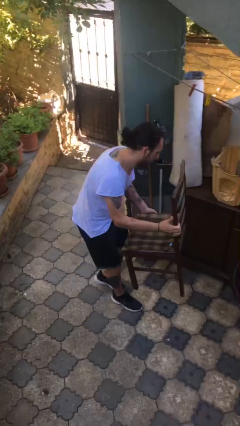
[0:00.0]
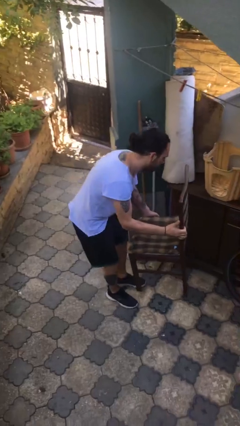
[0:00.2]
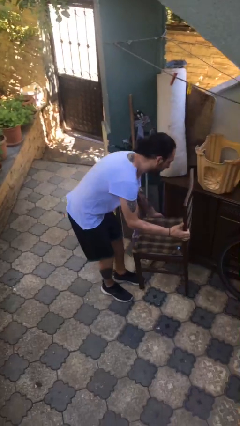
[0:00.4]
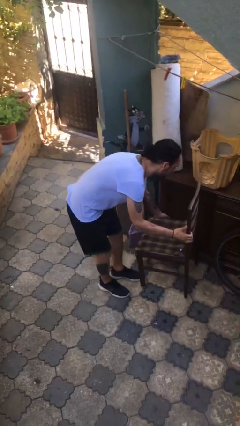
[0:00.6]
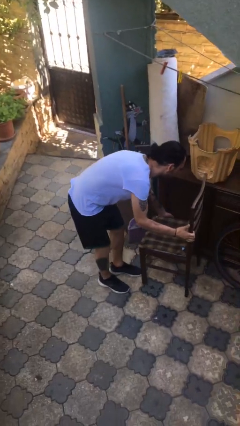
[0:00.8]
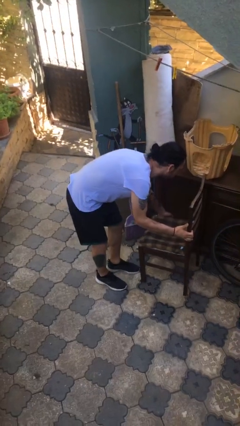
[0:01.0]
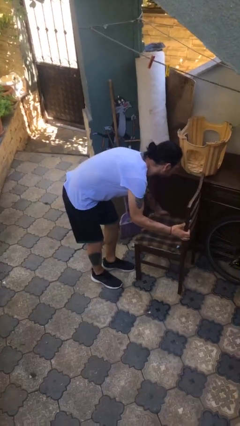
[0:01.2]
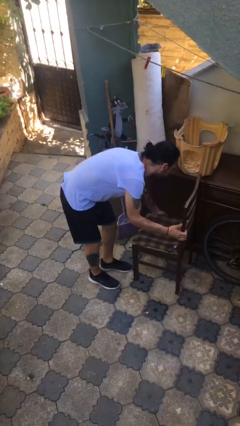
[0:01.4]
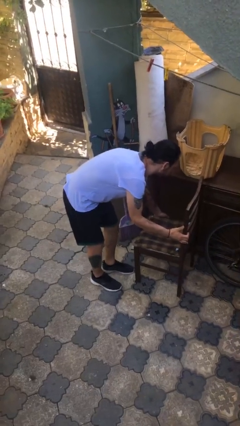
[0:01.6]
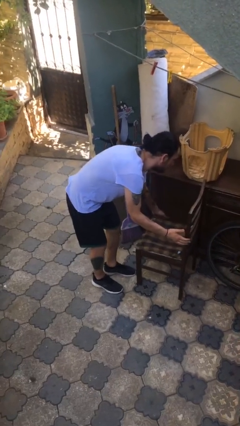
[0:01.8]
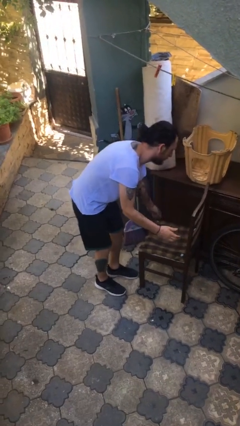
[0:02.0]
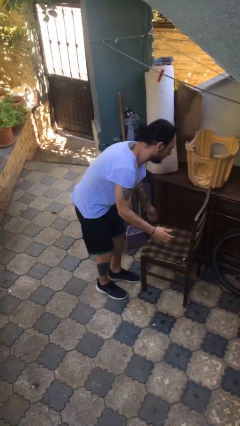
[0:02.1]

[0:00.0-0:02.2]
person puts down object on floor

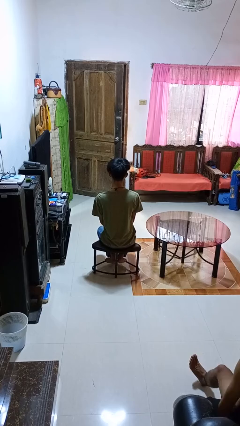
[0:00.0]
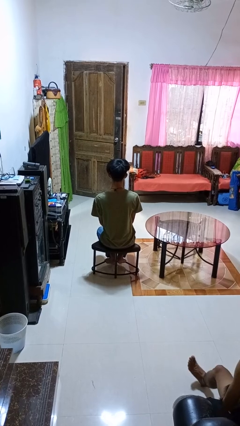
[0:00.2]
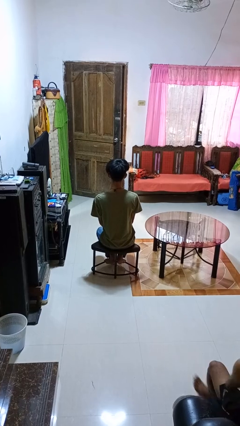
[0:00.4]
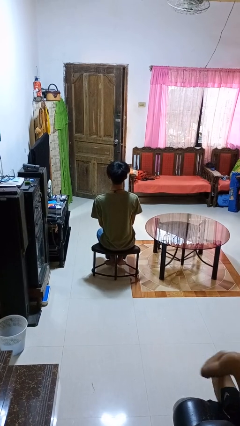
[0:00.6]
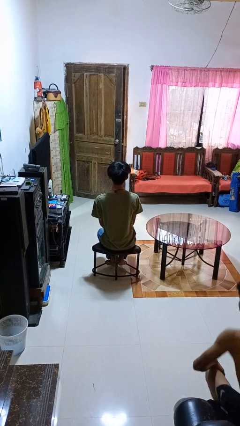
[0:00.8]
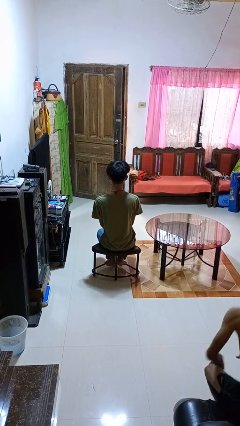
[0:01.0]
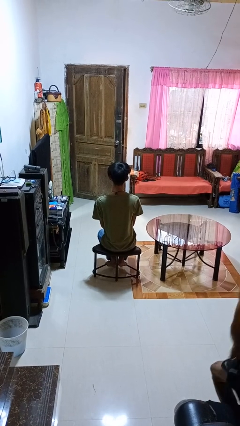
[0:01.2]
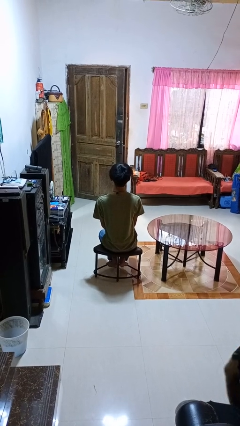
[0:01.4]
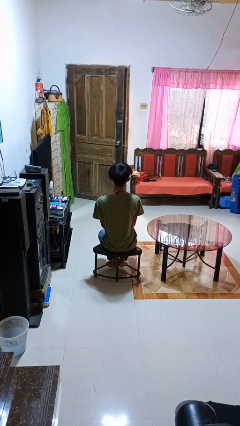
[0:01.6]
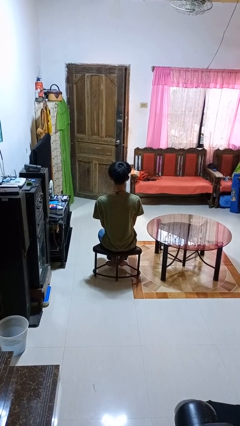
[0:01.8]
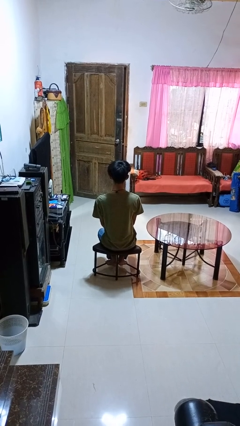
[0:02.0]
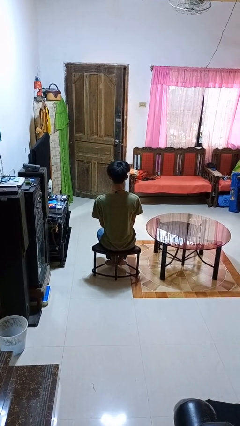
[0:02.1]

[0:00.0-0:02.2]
person nods head

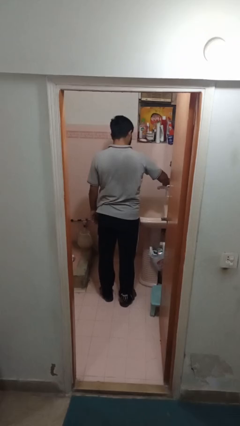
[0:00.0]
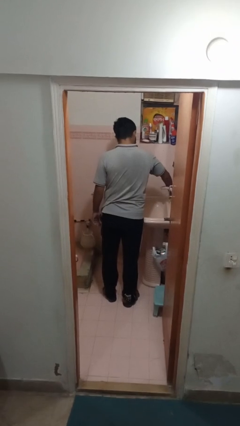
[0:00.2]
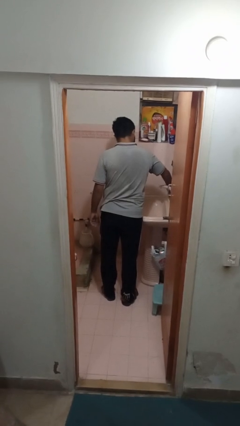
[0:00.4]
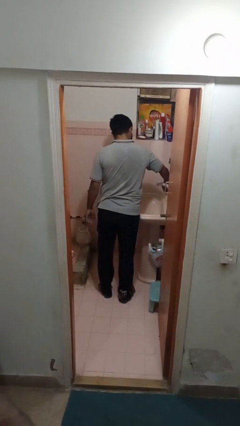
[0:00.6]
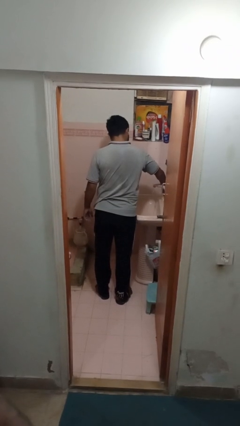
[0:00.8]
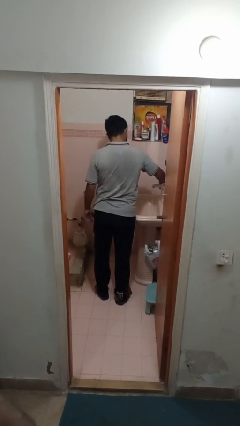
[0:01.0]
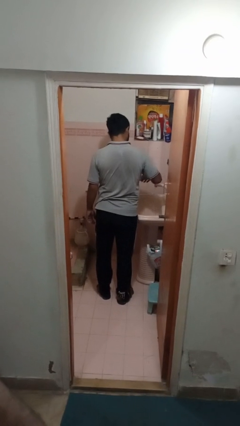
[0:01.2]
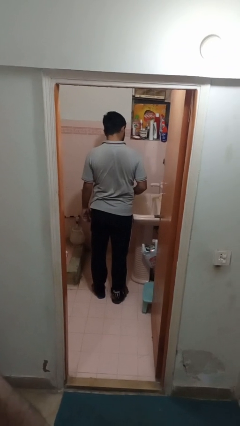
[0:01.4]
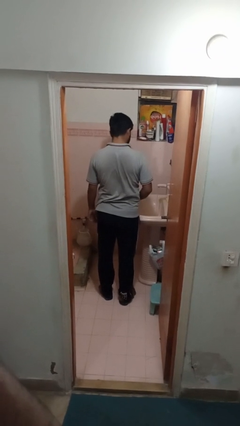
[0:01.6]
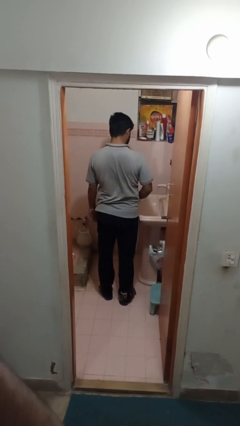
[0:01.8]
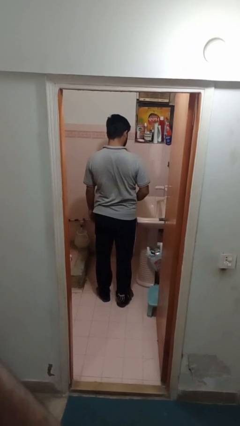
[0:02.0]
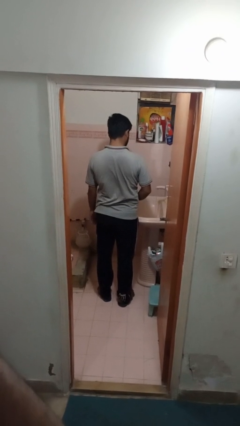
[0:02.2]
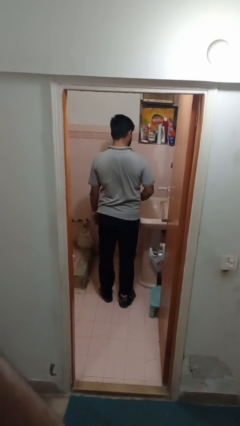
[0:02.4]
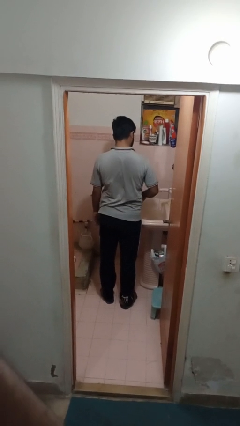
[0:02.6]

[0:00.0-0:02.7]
person turns on faucet

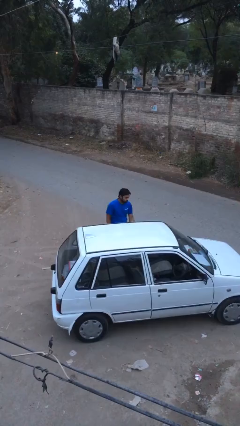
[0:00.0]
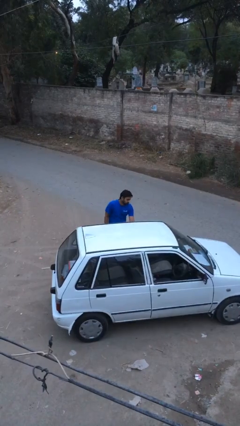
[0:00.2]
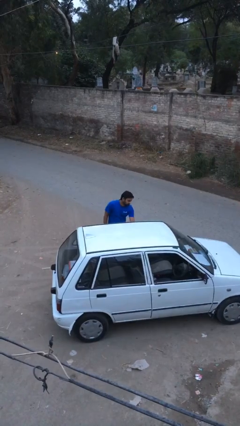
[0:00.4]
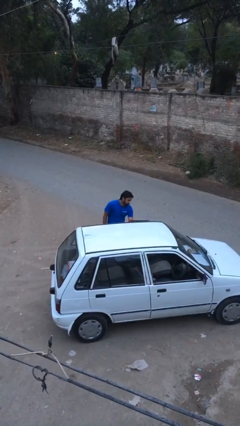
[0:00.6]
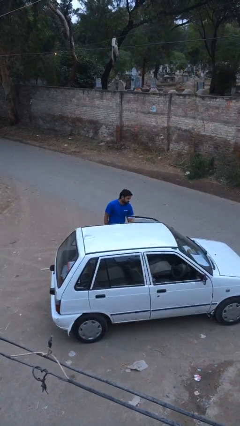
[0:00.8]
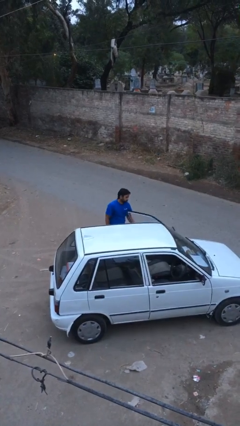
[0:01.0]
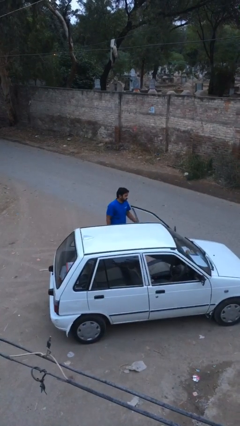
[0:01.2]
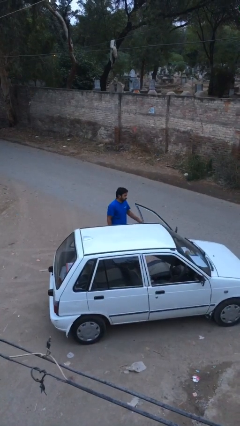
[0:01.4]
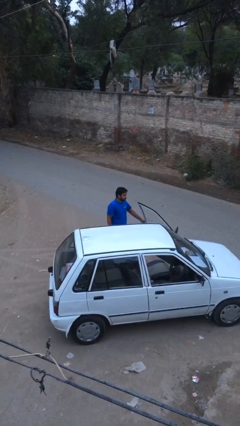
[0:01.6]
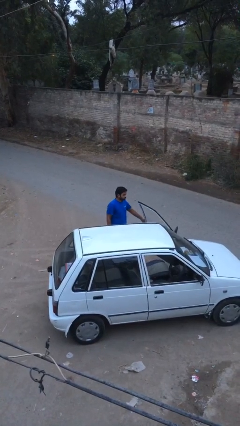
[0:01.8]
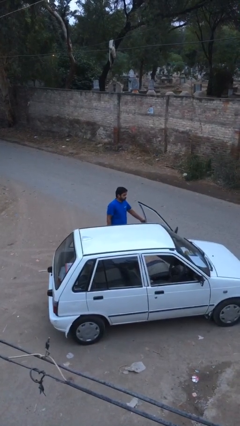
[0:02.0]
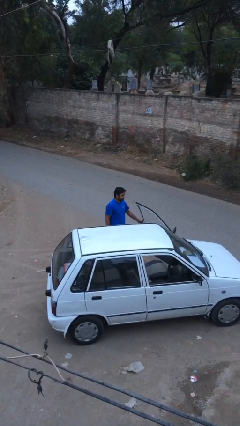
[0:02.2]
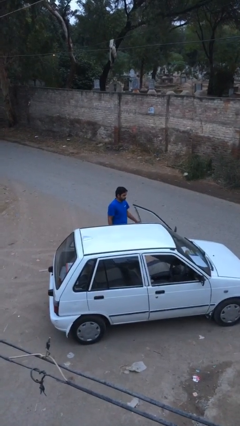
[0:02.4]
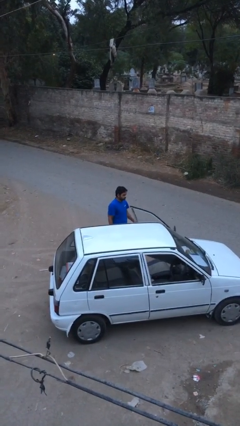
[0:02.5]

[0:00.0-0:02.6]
person opens car door

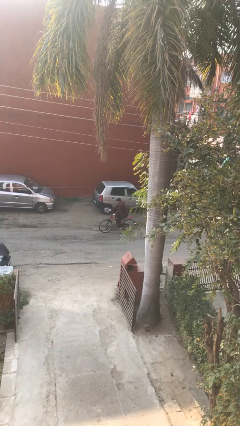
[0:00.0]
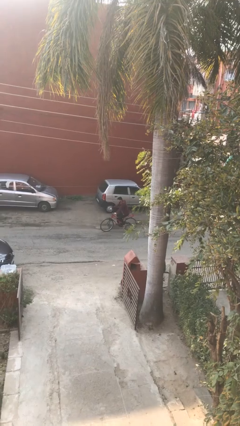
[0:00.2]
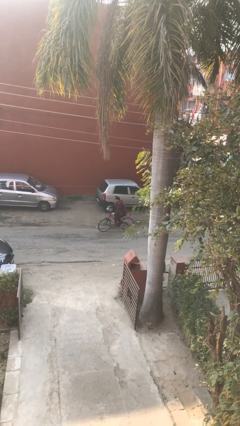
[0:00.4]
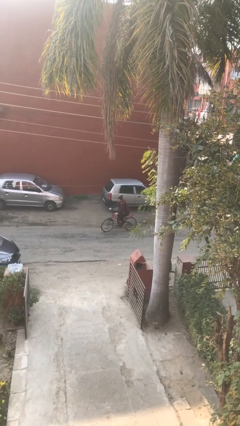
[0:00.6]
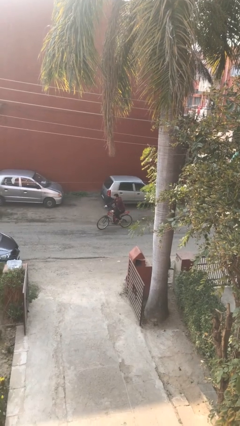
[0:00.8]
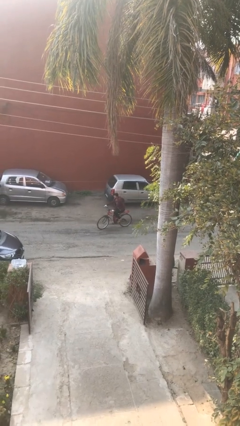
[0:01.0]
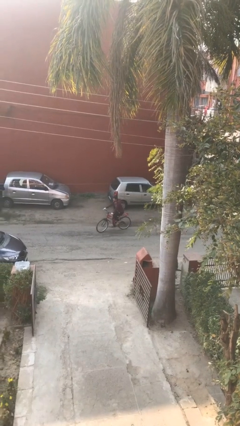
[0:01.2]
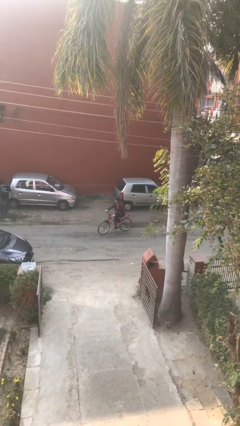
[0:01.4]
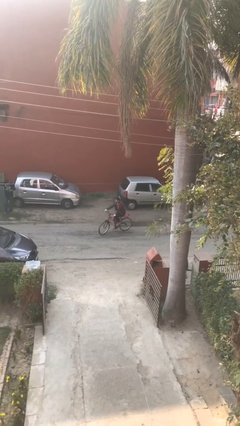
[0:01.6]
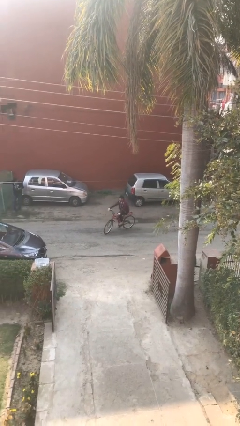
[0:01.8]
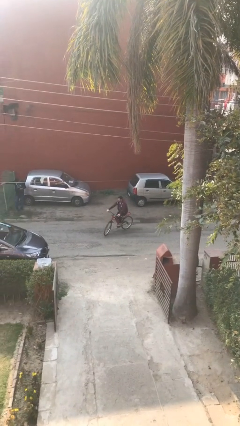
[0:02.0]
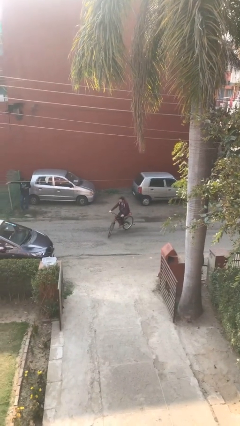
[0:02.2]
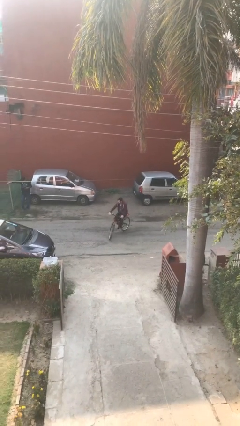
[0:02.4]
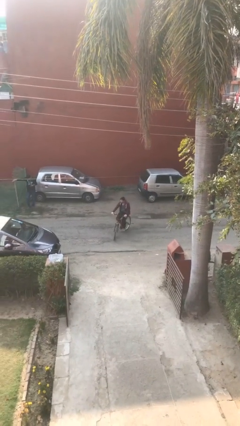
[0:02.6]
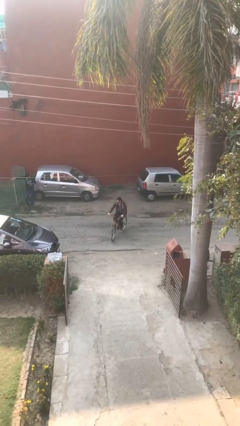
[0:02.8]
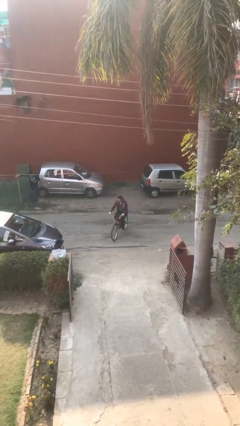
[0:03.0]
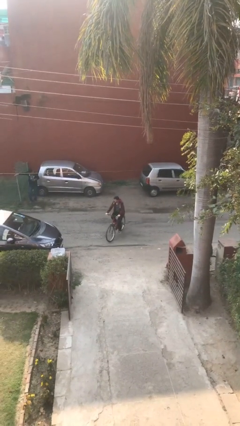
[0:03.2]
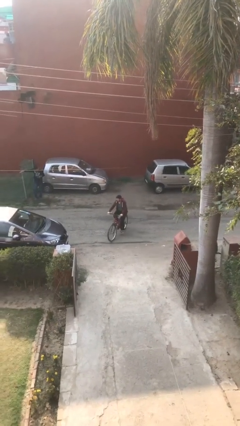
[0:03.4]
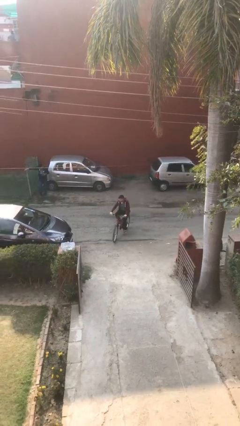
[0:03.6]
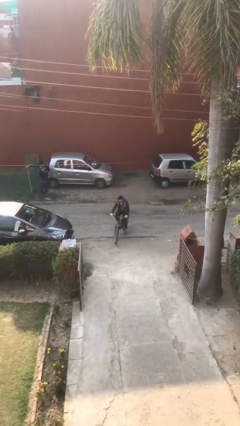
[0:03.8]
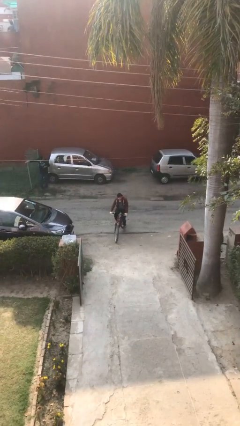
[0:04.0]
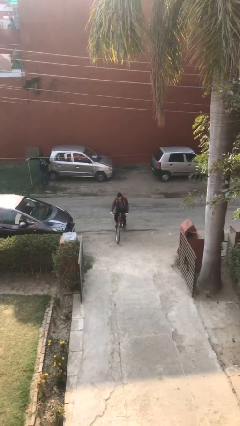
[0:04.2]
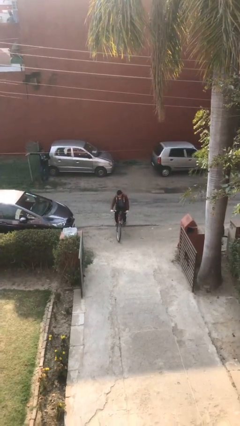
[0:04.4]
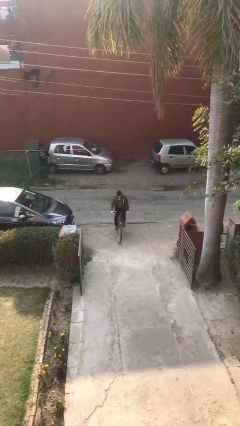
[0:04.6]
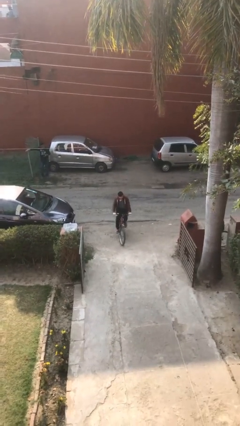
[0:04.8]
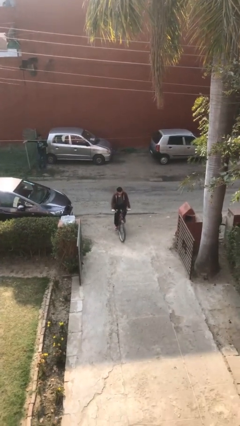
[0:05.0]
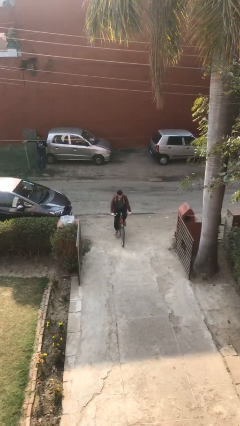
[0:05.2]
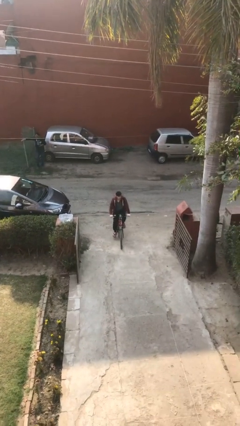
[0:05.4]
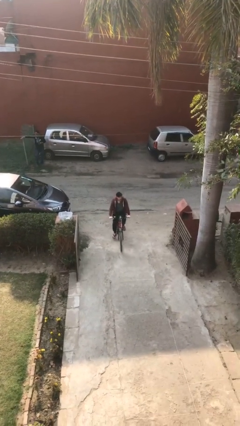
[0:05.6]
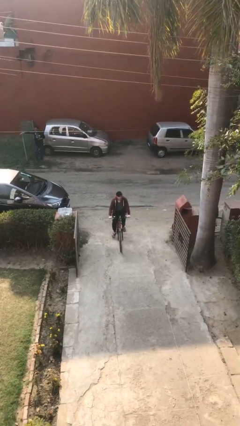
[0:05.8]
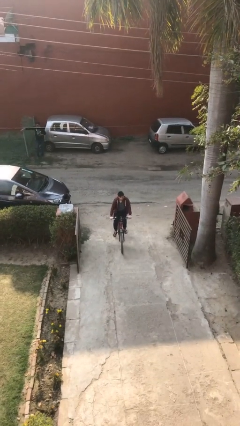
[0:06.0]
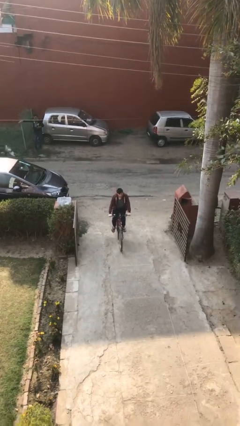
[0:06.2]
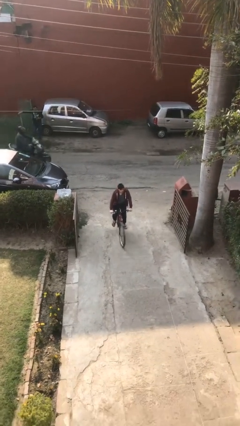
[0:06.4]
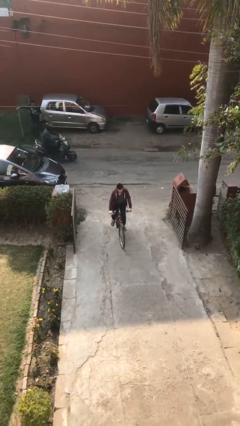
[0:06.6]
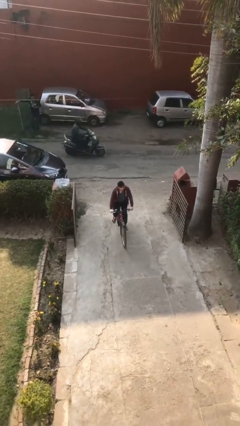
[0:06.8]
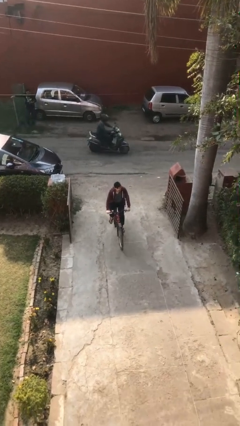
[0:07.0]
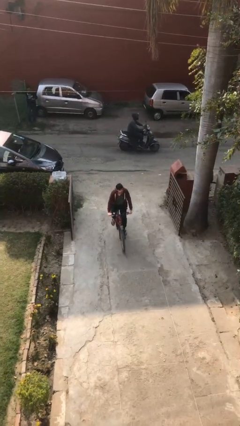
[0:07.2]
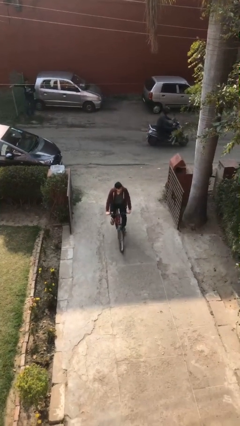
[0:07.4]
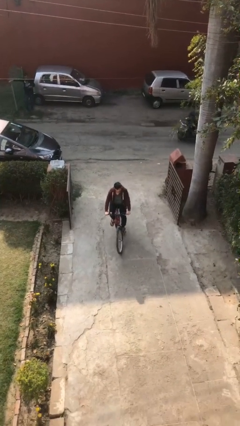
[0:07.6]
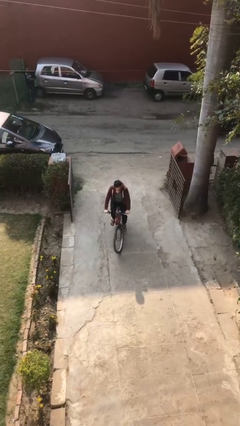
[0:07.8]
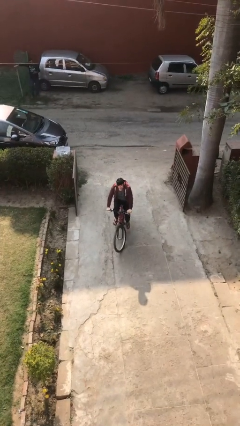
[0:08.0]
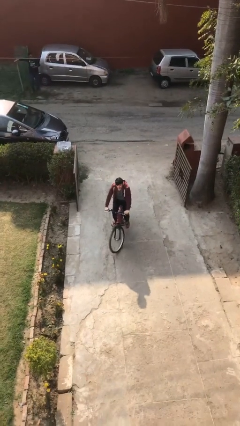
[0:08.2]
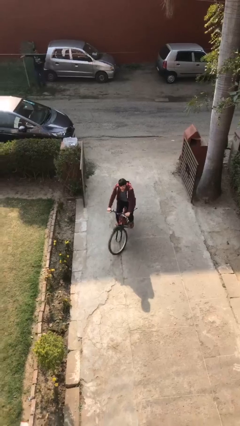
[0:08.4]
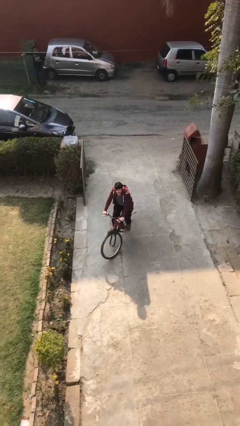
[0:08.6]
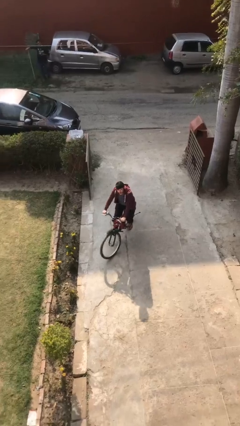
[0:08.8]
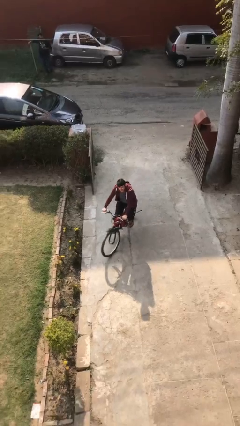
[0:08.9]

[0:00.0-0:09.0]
person rides bicycle
